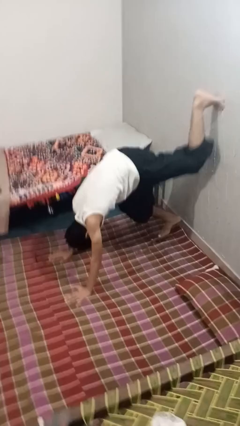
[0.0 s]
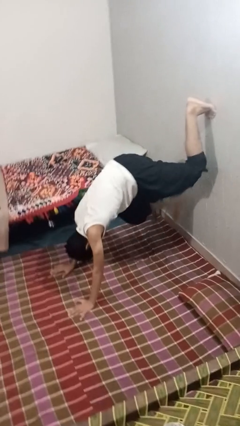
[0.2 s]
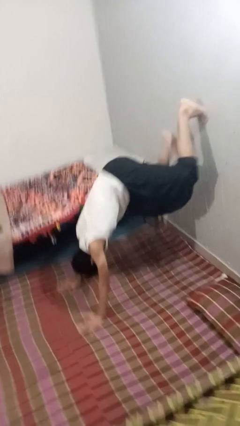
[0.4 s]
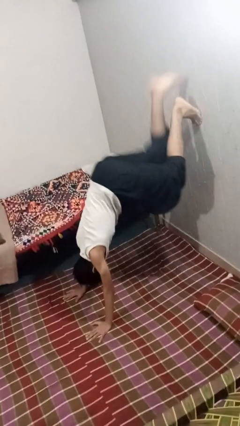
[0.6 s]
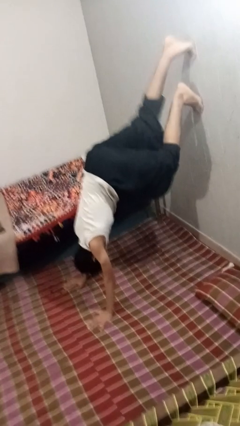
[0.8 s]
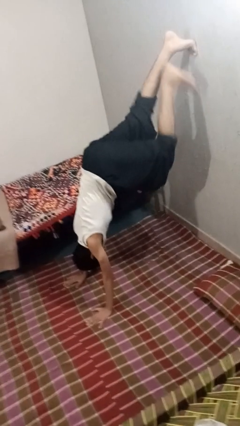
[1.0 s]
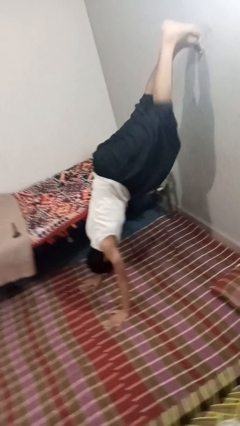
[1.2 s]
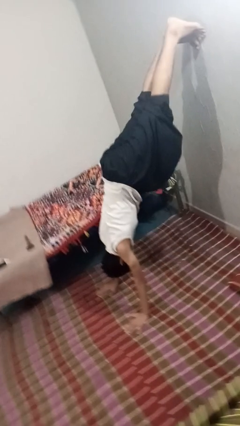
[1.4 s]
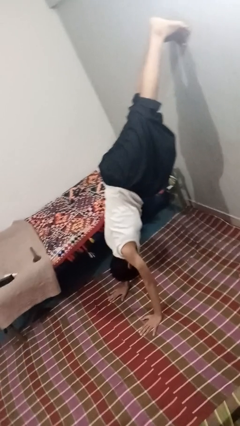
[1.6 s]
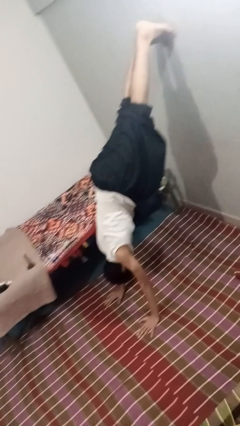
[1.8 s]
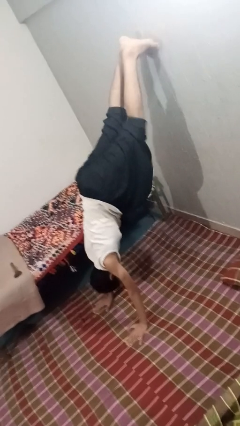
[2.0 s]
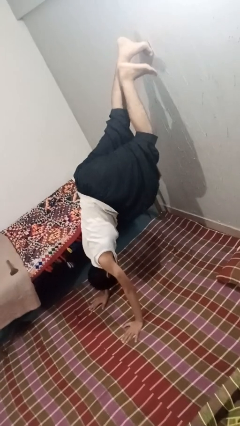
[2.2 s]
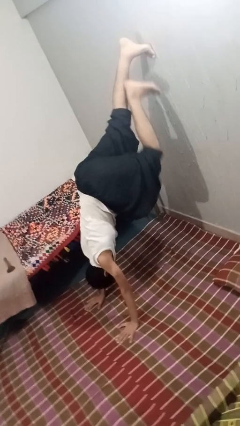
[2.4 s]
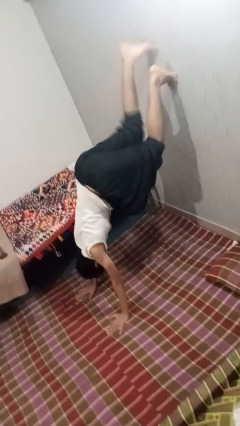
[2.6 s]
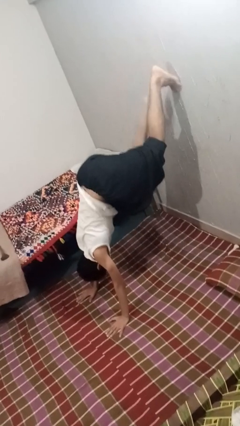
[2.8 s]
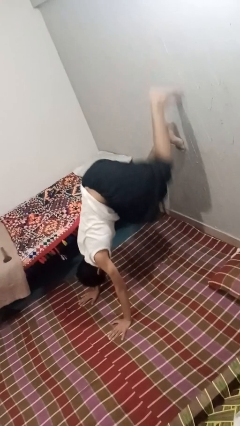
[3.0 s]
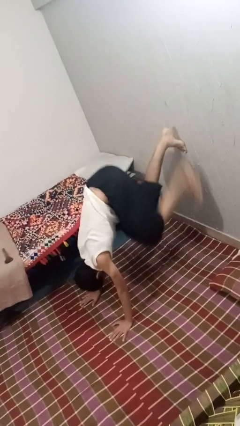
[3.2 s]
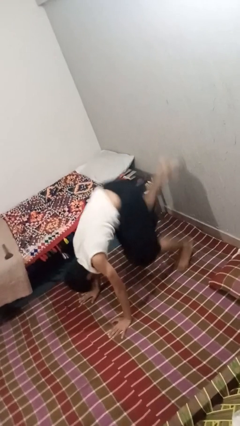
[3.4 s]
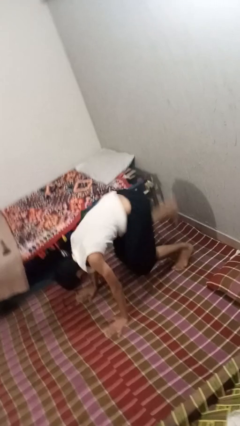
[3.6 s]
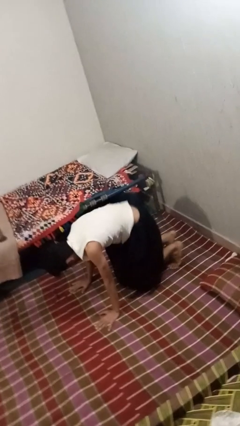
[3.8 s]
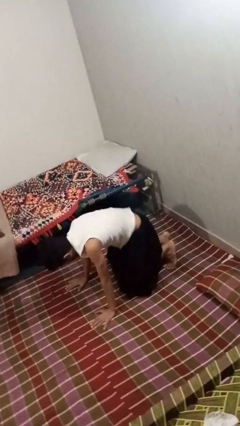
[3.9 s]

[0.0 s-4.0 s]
person handstand

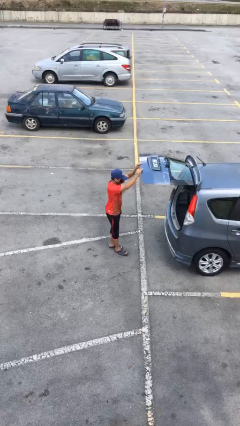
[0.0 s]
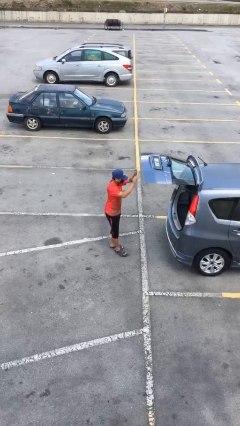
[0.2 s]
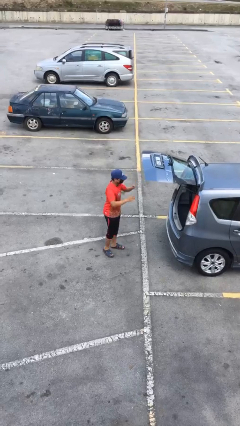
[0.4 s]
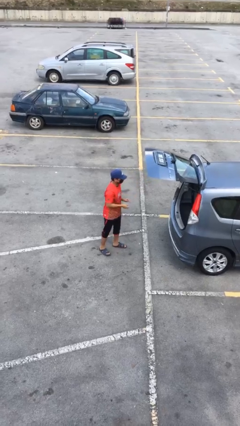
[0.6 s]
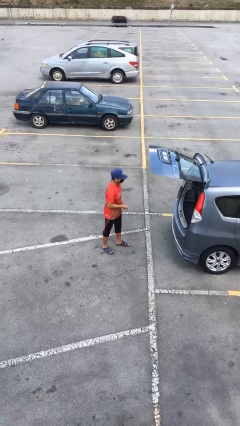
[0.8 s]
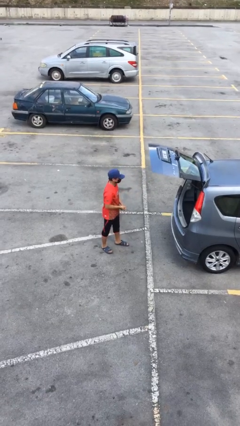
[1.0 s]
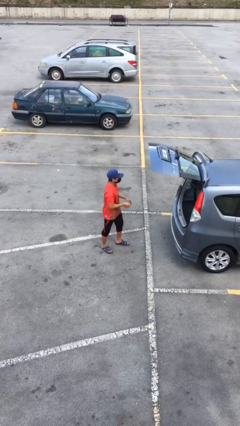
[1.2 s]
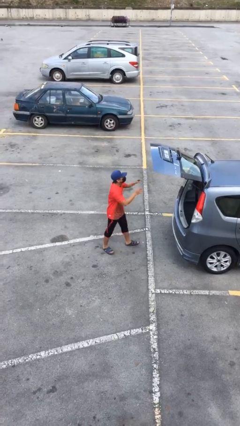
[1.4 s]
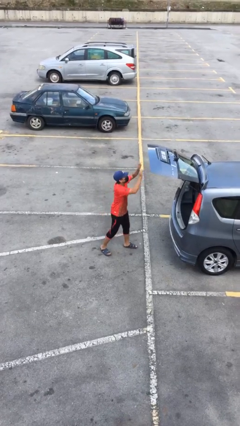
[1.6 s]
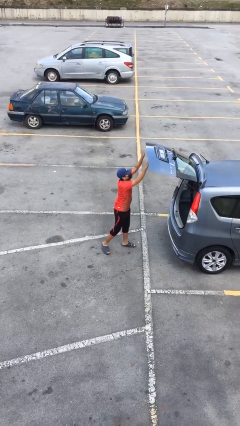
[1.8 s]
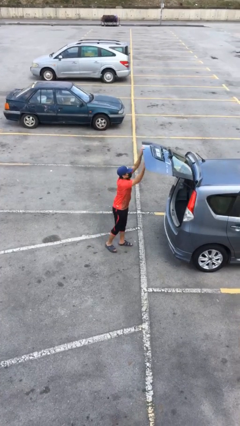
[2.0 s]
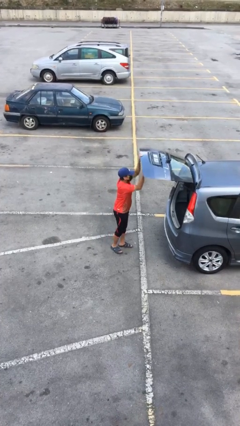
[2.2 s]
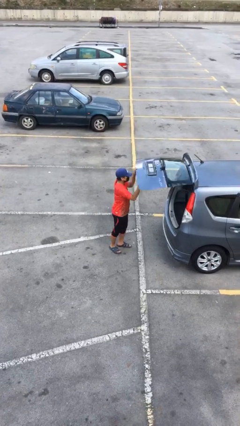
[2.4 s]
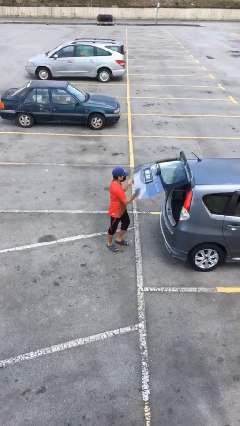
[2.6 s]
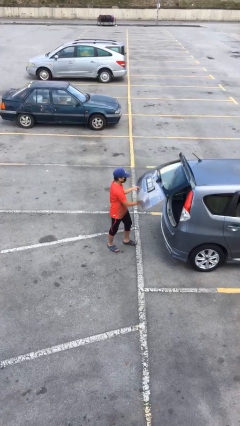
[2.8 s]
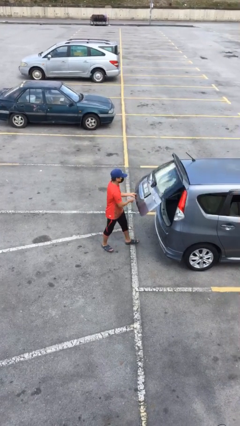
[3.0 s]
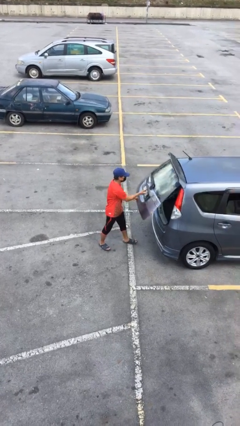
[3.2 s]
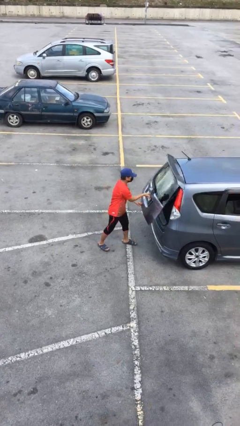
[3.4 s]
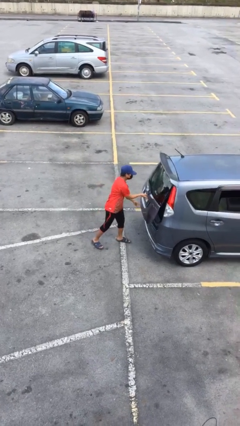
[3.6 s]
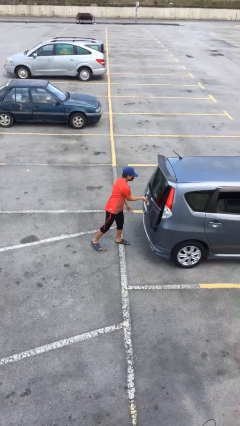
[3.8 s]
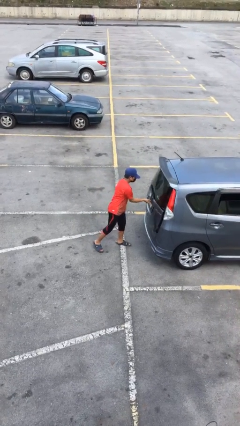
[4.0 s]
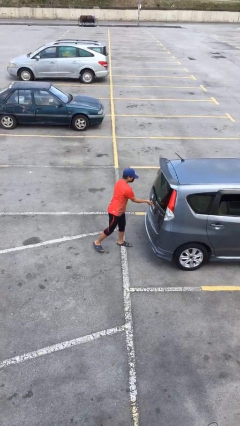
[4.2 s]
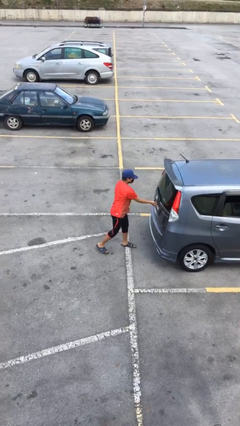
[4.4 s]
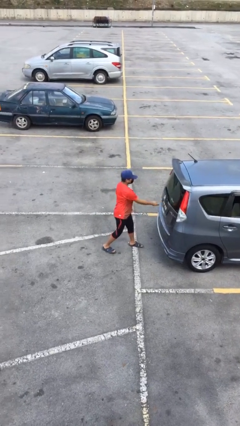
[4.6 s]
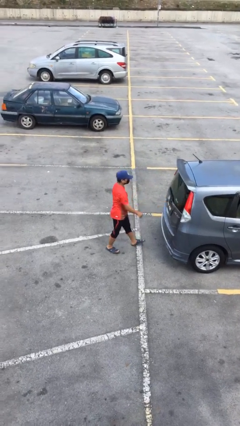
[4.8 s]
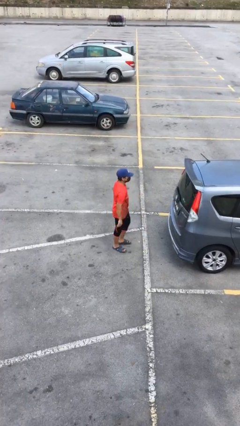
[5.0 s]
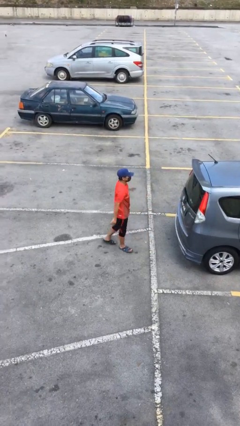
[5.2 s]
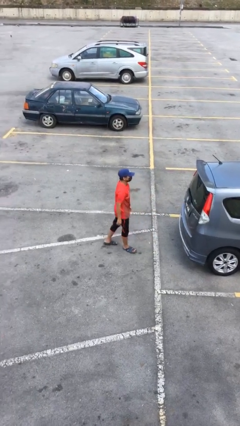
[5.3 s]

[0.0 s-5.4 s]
person closes car trunk

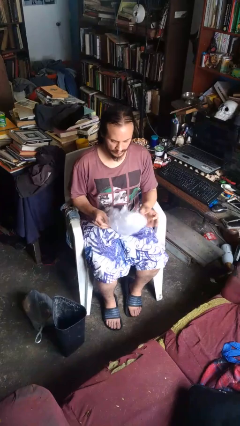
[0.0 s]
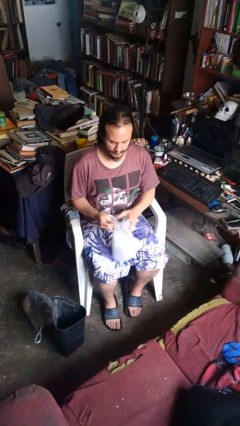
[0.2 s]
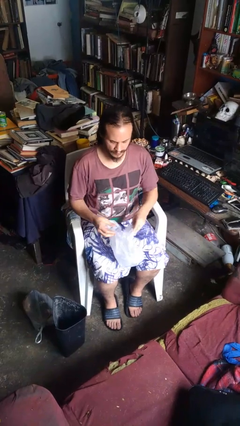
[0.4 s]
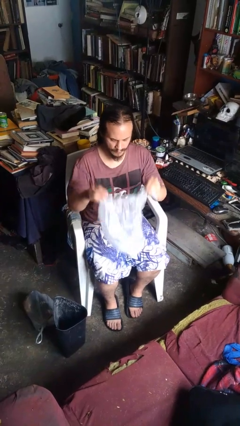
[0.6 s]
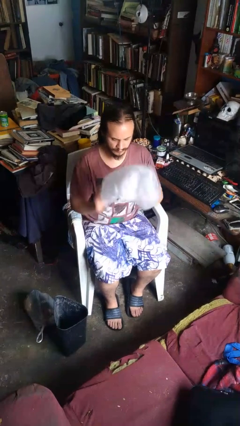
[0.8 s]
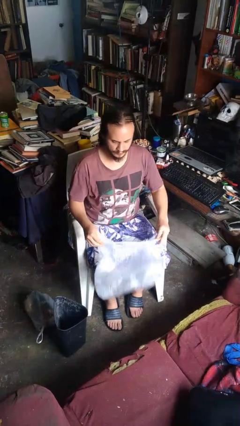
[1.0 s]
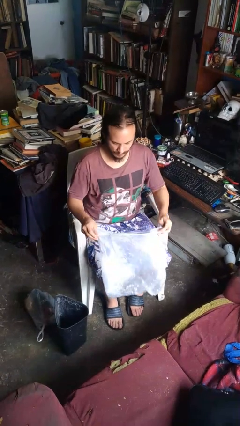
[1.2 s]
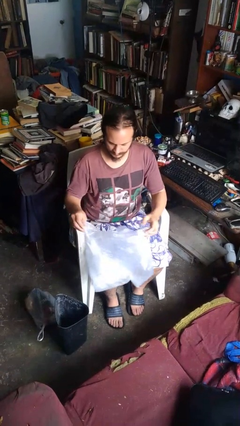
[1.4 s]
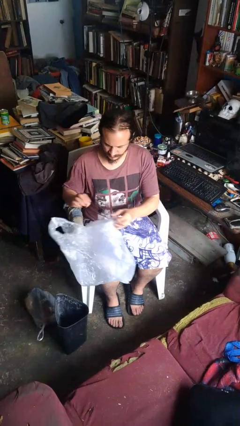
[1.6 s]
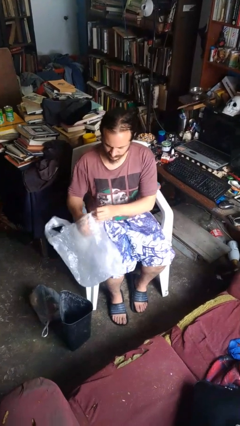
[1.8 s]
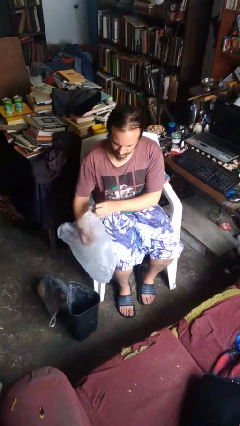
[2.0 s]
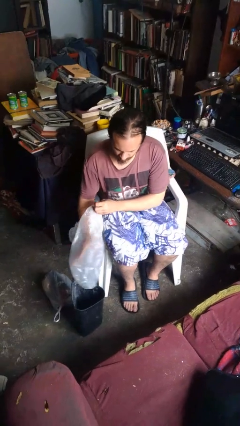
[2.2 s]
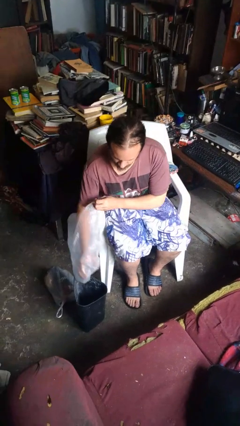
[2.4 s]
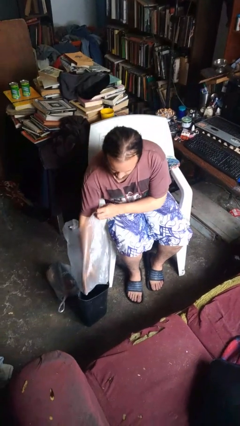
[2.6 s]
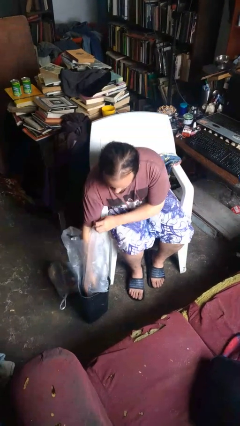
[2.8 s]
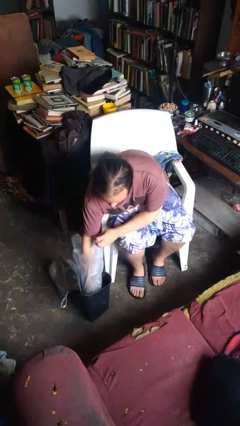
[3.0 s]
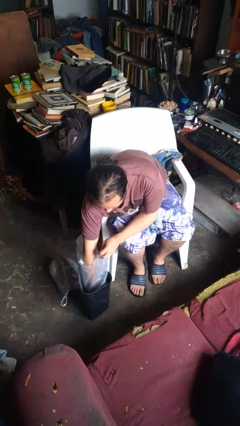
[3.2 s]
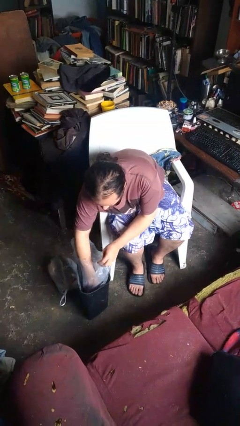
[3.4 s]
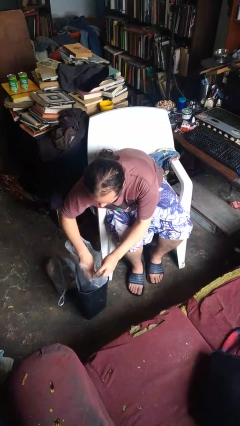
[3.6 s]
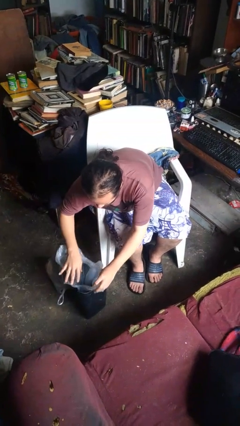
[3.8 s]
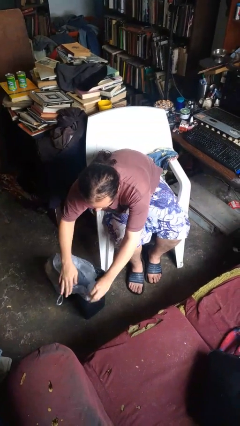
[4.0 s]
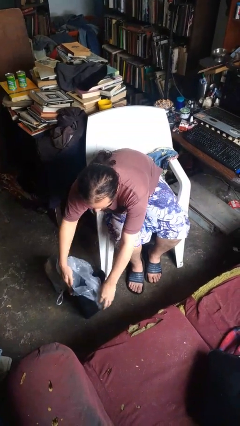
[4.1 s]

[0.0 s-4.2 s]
person inserts trashbag into trashcan

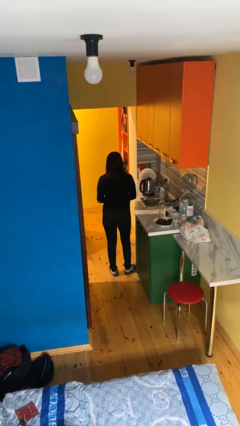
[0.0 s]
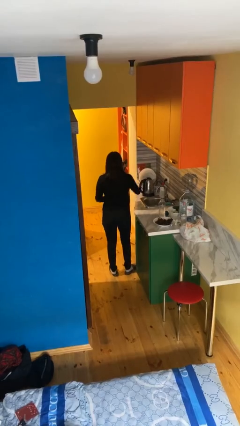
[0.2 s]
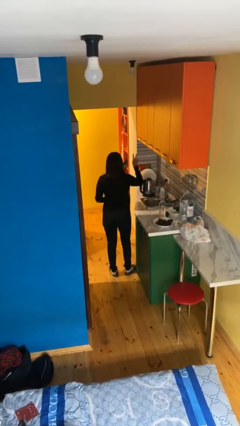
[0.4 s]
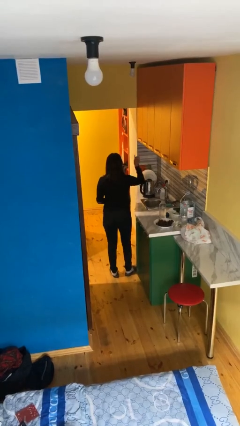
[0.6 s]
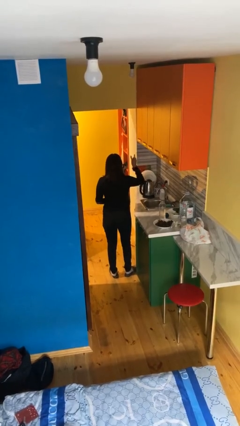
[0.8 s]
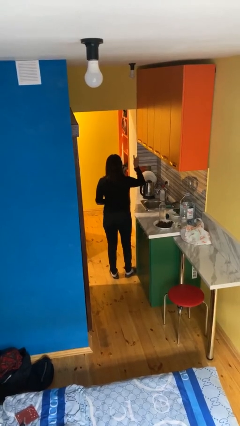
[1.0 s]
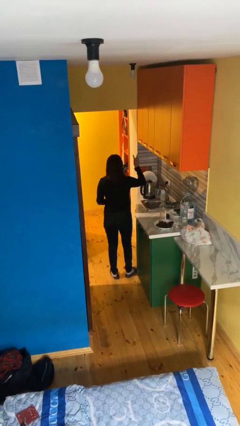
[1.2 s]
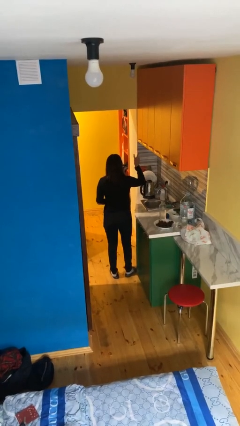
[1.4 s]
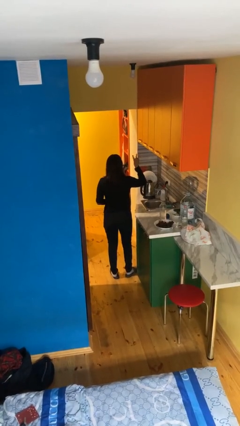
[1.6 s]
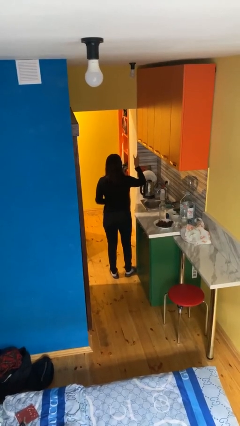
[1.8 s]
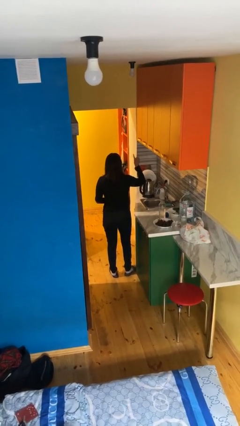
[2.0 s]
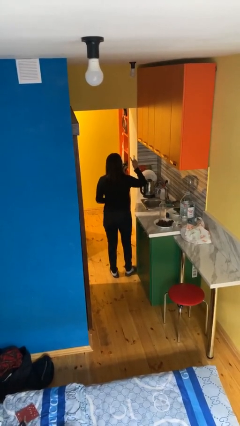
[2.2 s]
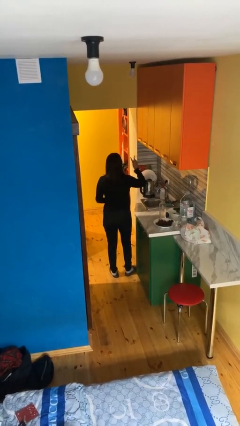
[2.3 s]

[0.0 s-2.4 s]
person gestures peace

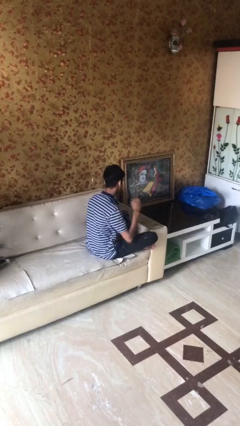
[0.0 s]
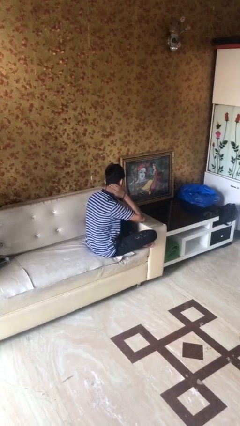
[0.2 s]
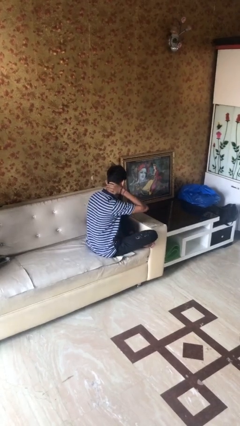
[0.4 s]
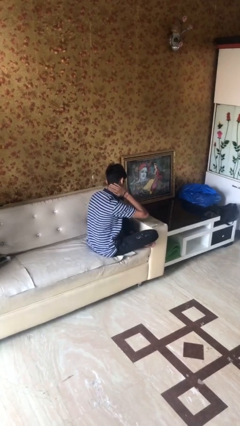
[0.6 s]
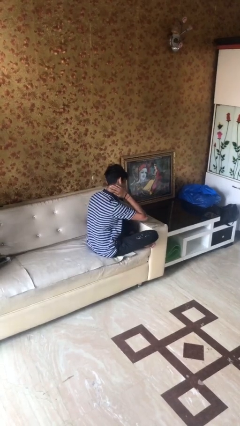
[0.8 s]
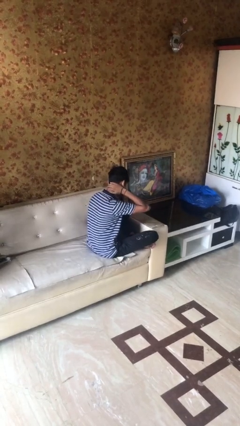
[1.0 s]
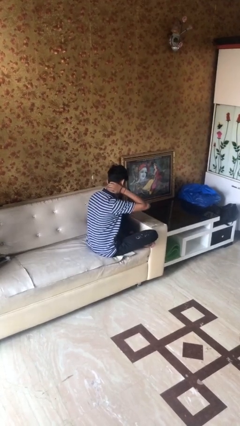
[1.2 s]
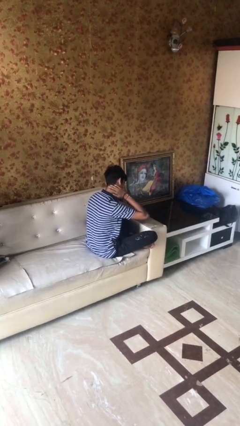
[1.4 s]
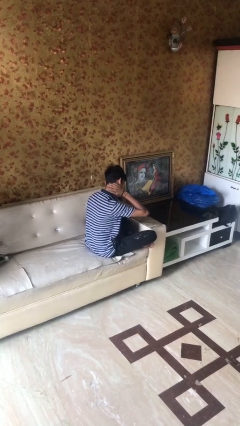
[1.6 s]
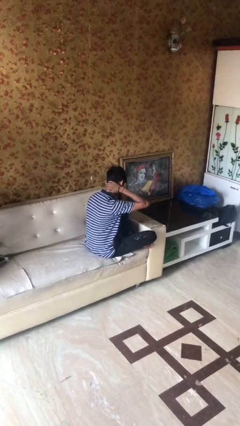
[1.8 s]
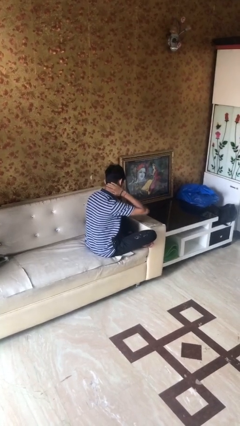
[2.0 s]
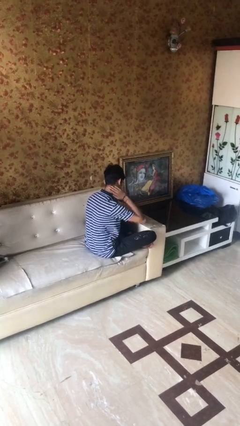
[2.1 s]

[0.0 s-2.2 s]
person rubs neck
